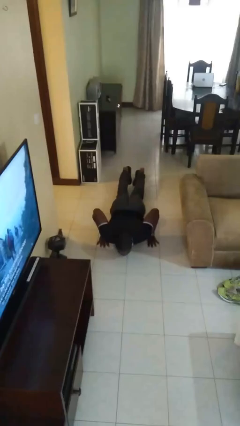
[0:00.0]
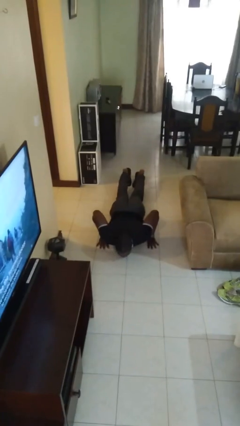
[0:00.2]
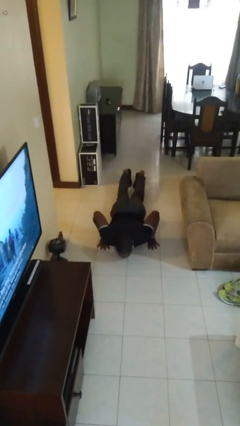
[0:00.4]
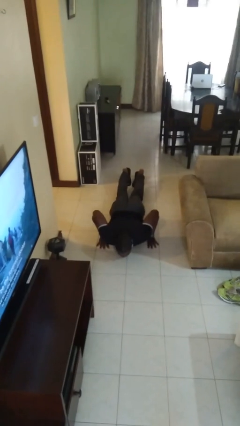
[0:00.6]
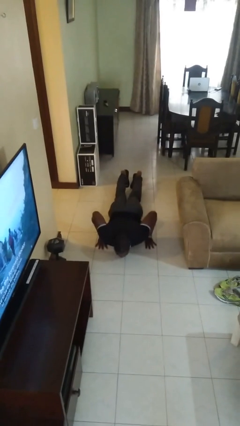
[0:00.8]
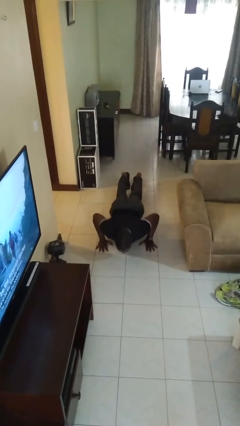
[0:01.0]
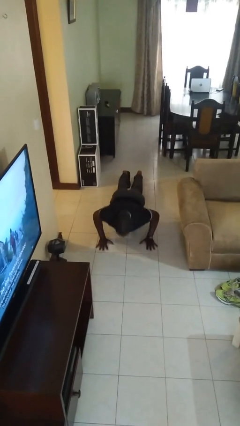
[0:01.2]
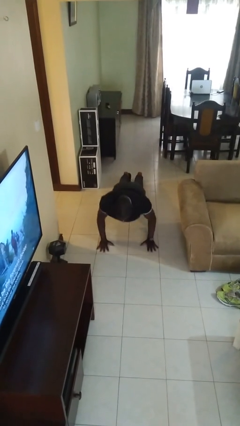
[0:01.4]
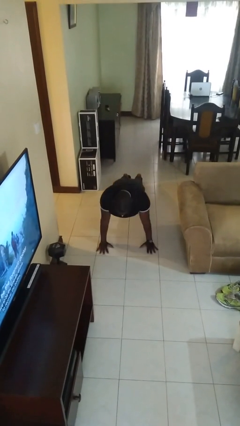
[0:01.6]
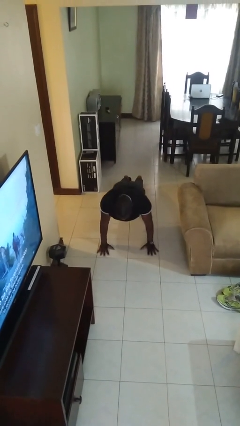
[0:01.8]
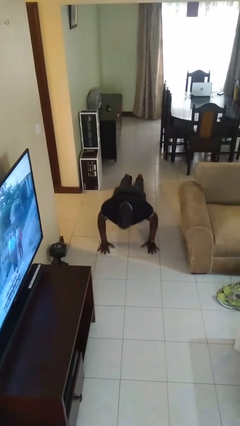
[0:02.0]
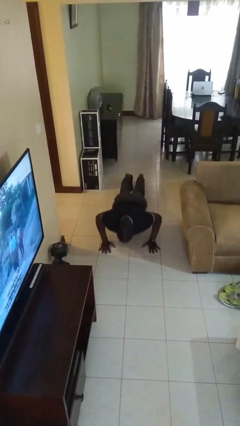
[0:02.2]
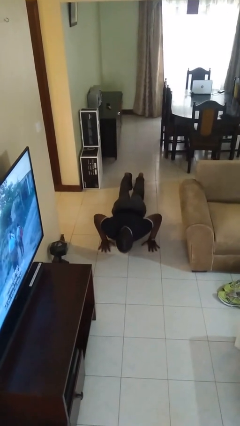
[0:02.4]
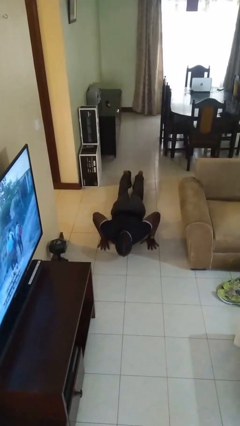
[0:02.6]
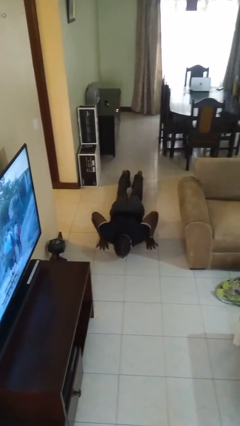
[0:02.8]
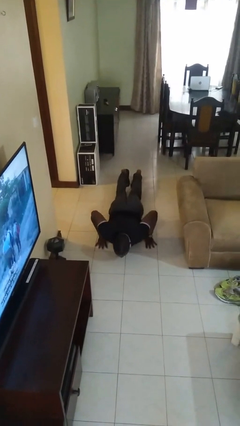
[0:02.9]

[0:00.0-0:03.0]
person exercises with pushup

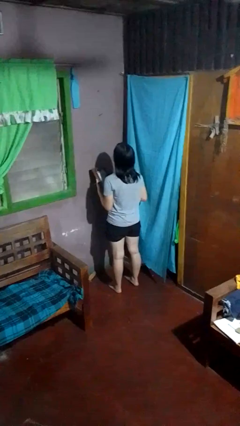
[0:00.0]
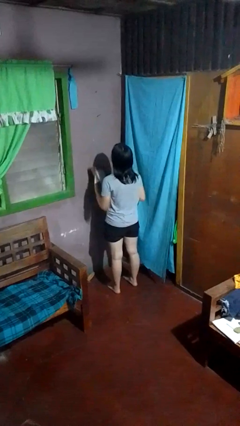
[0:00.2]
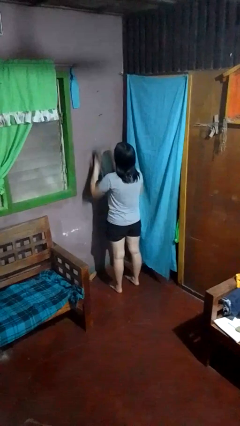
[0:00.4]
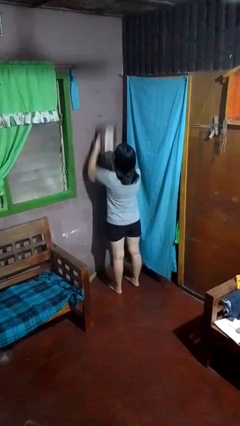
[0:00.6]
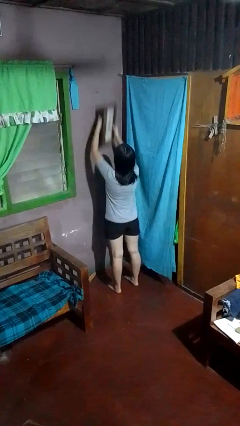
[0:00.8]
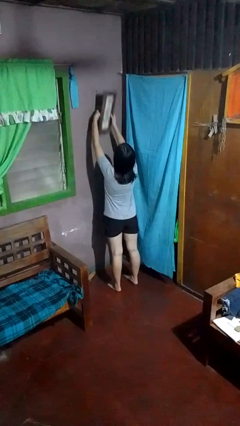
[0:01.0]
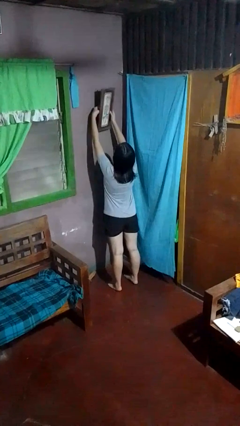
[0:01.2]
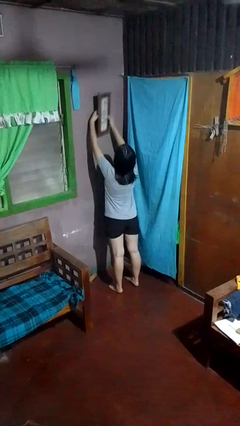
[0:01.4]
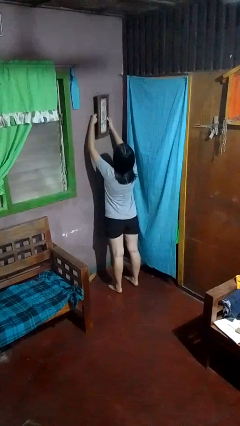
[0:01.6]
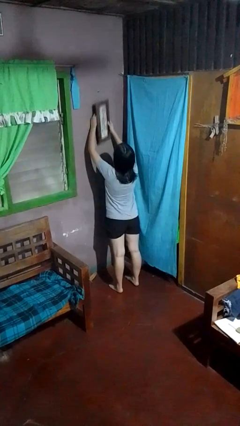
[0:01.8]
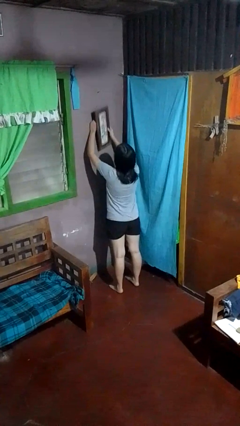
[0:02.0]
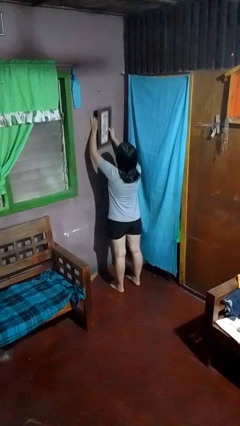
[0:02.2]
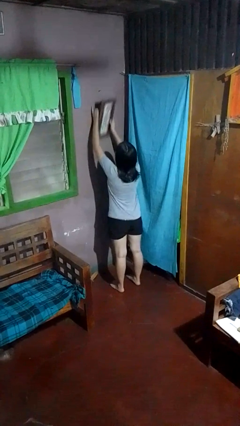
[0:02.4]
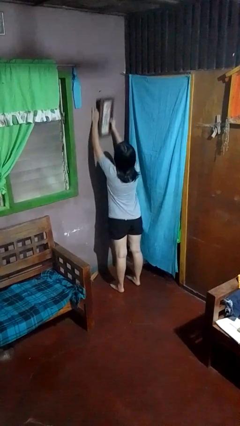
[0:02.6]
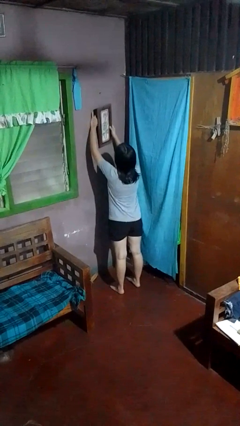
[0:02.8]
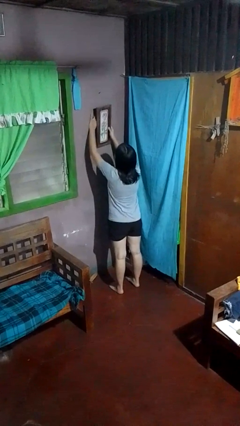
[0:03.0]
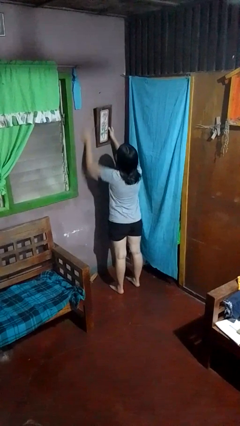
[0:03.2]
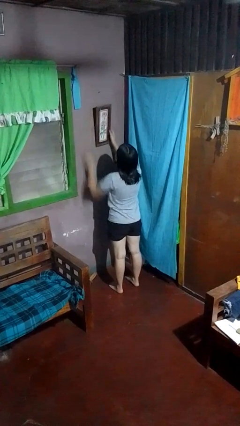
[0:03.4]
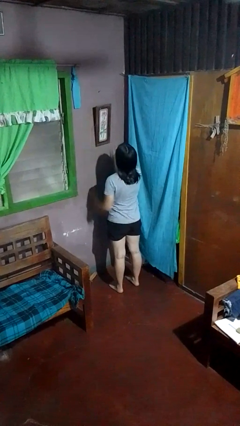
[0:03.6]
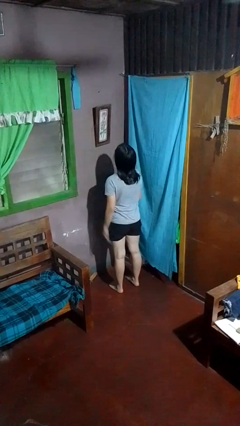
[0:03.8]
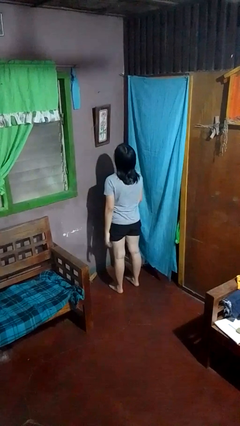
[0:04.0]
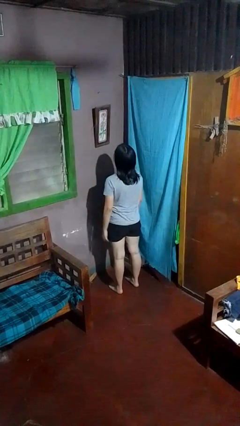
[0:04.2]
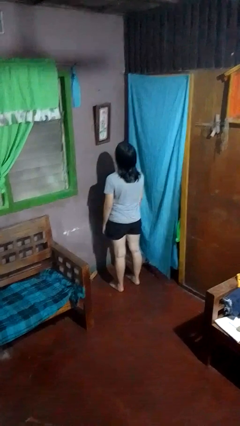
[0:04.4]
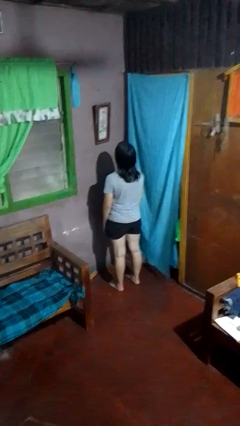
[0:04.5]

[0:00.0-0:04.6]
person puts up picture frame

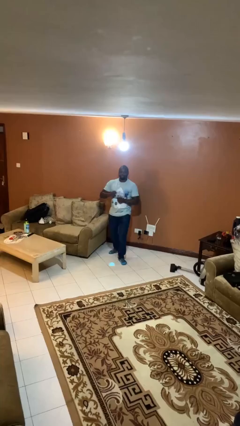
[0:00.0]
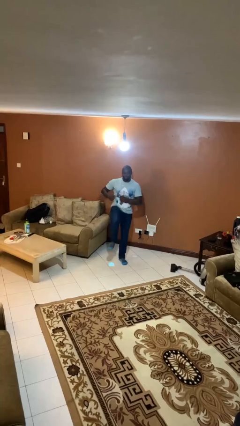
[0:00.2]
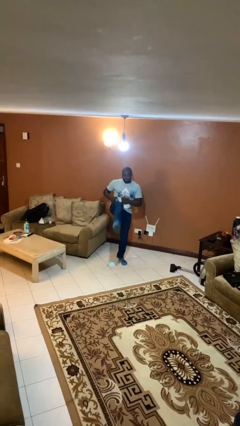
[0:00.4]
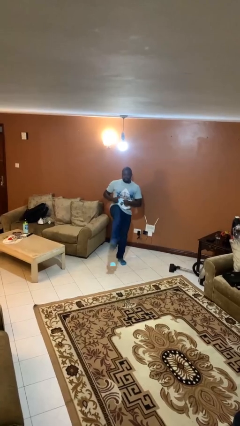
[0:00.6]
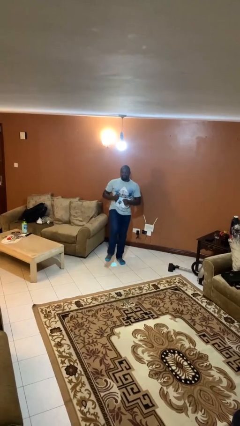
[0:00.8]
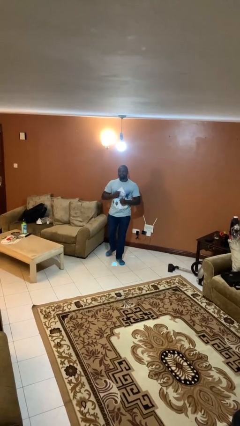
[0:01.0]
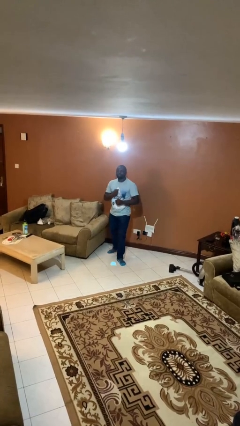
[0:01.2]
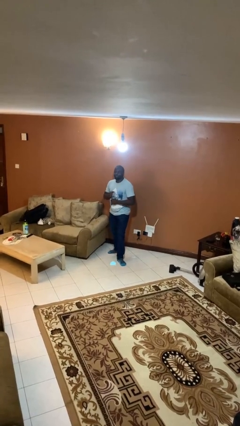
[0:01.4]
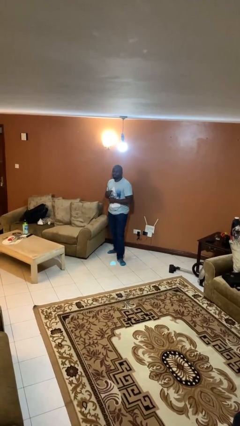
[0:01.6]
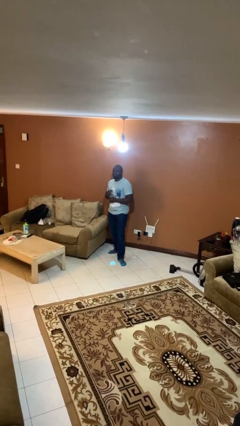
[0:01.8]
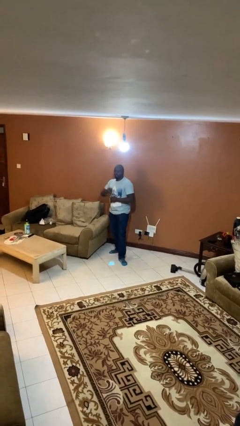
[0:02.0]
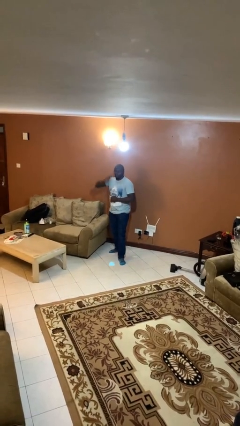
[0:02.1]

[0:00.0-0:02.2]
person karate kicks

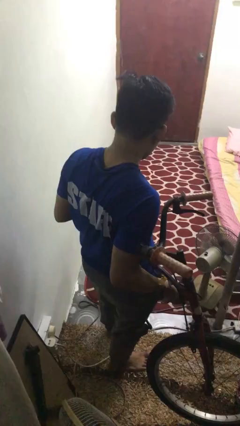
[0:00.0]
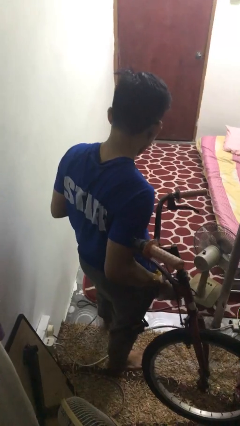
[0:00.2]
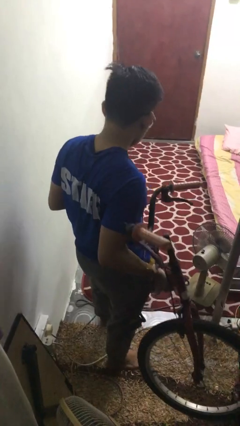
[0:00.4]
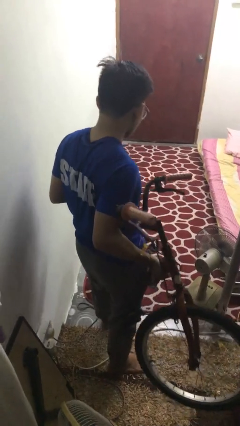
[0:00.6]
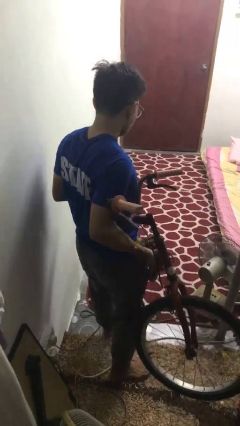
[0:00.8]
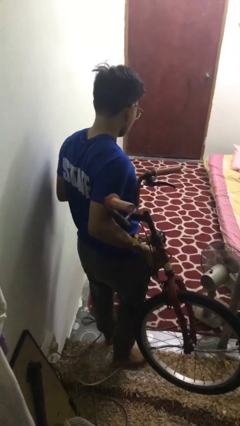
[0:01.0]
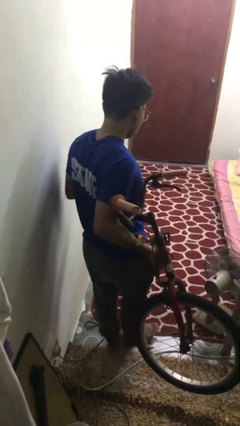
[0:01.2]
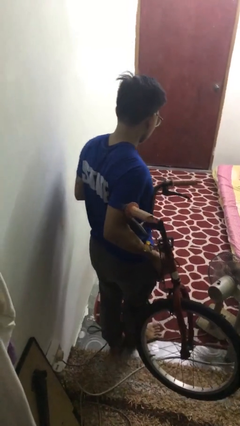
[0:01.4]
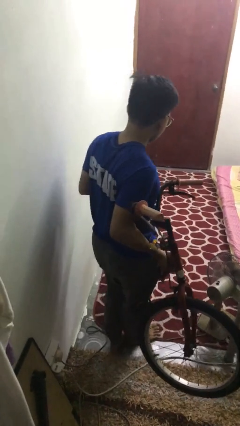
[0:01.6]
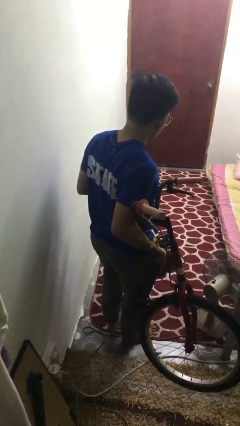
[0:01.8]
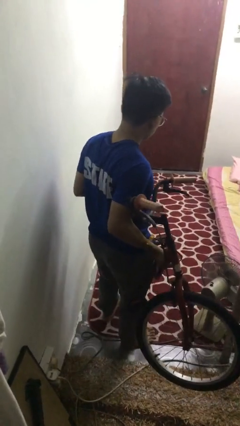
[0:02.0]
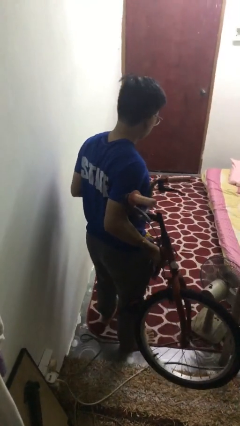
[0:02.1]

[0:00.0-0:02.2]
person carries bicycle

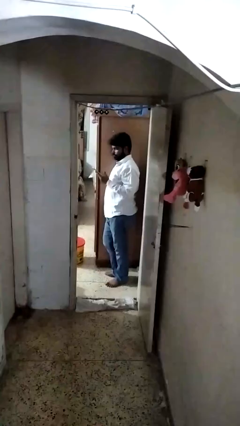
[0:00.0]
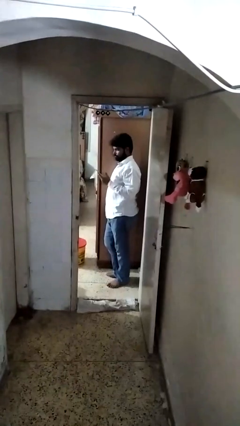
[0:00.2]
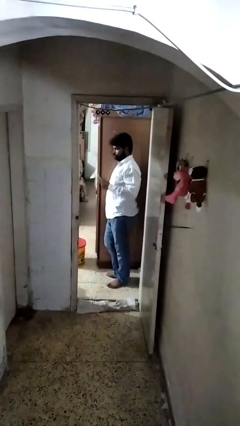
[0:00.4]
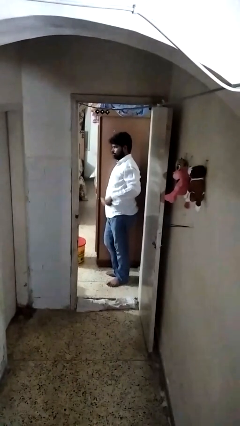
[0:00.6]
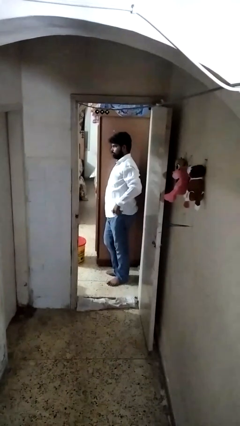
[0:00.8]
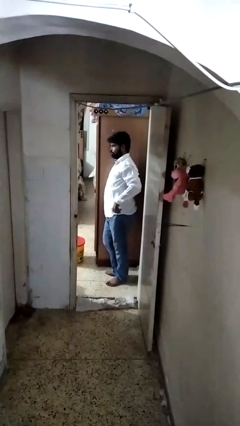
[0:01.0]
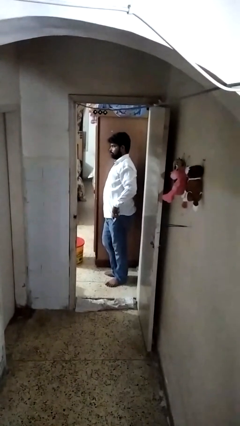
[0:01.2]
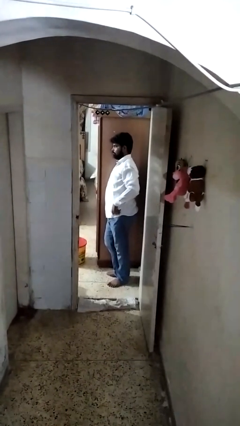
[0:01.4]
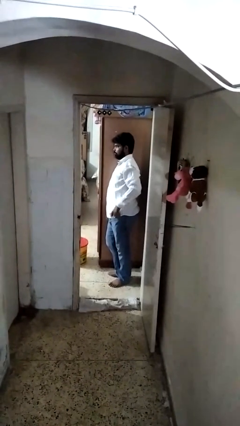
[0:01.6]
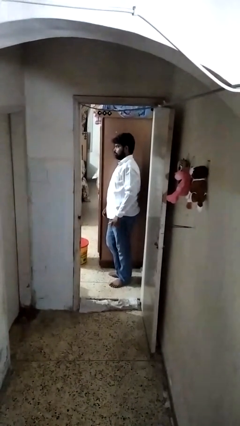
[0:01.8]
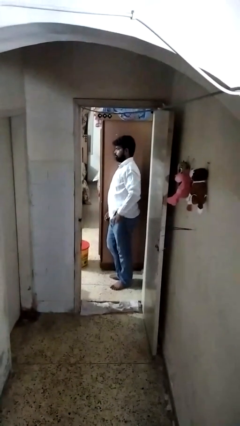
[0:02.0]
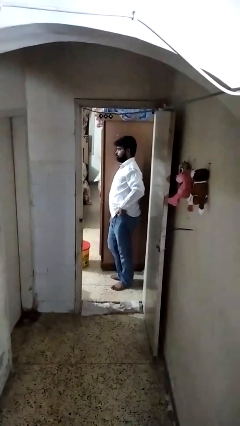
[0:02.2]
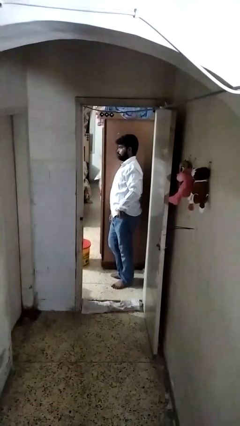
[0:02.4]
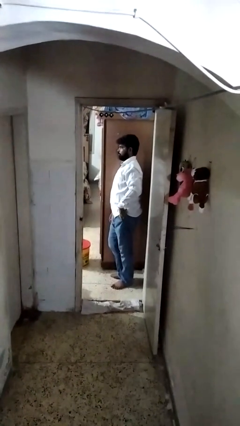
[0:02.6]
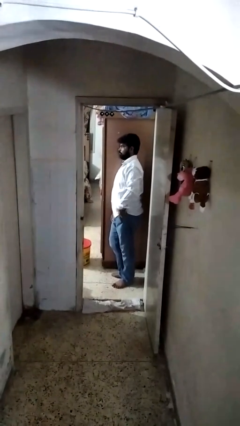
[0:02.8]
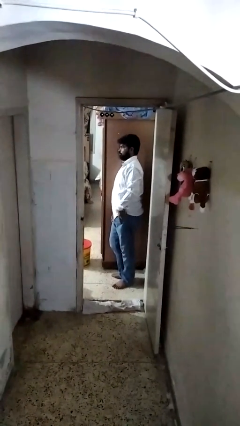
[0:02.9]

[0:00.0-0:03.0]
person puts phone into pocket

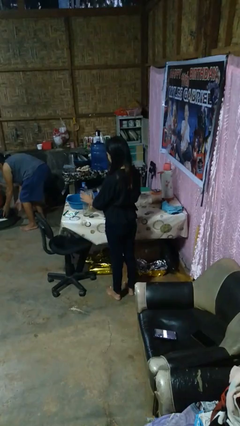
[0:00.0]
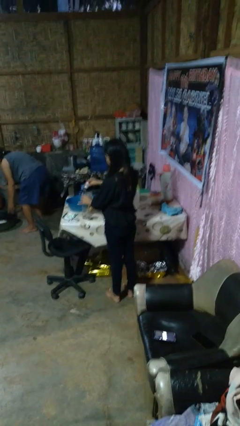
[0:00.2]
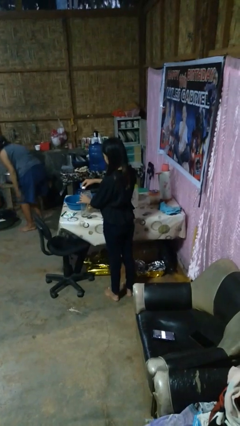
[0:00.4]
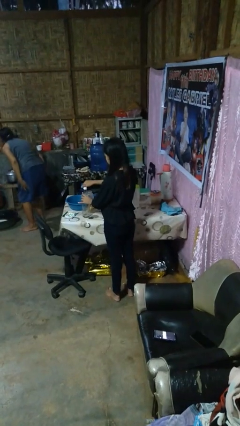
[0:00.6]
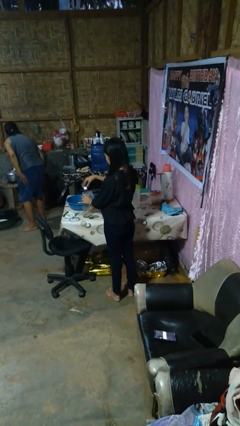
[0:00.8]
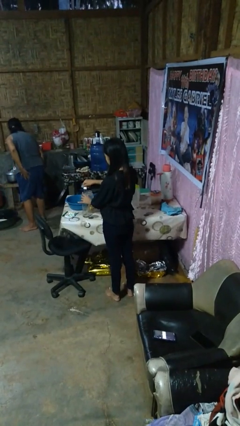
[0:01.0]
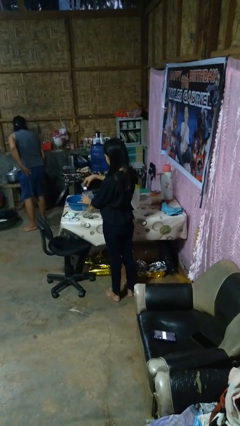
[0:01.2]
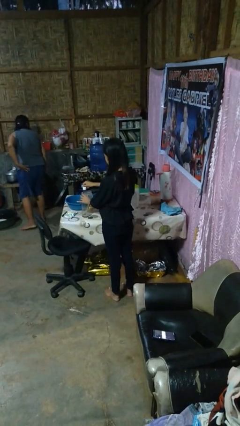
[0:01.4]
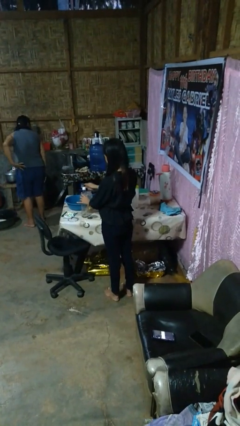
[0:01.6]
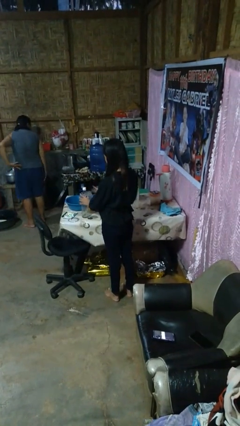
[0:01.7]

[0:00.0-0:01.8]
person screws lid to bottle

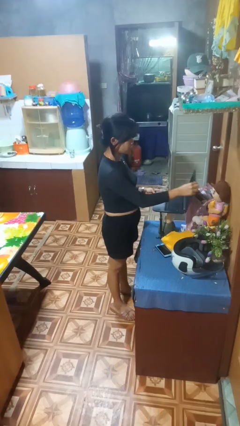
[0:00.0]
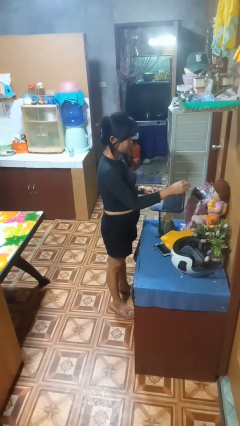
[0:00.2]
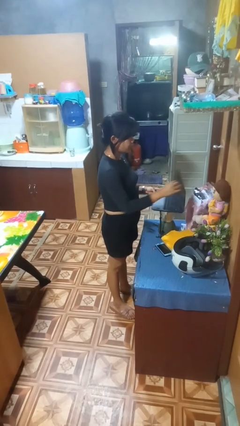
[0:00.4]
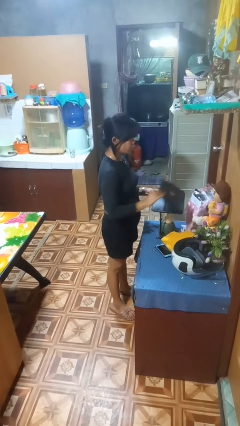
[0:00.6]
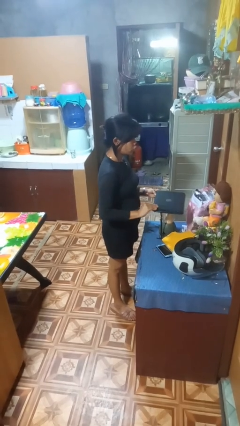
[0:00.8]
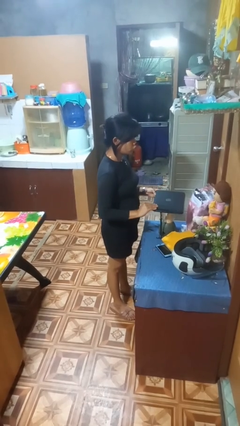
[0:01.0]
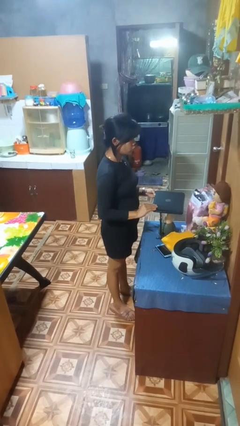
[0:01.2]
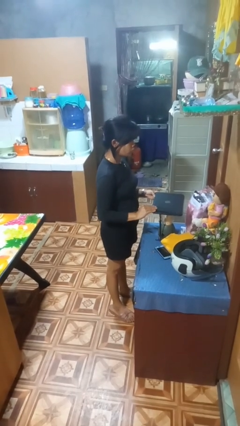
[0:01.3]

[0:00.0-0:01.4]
person closes laptop
